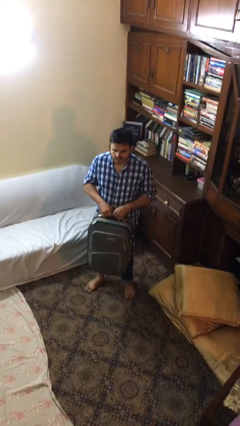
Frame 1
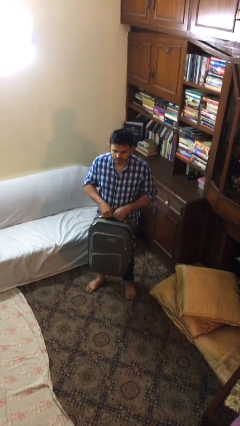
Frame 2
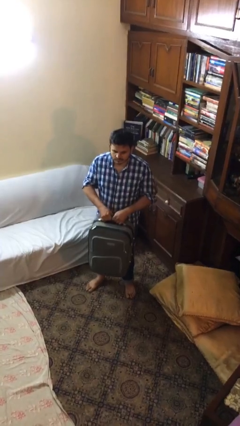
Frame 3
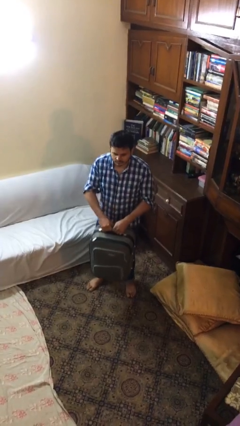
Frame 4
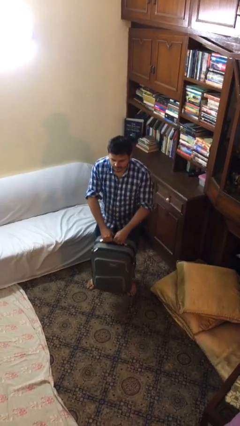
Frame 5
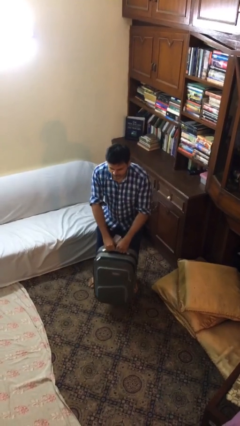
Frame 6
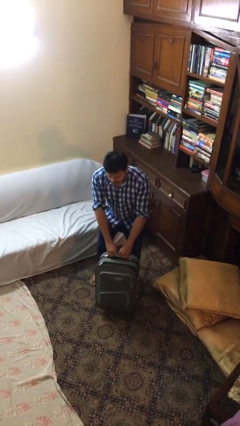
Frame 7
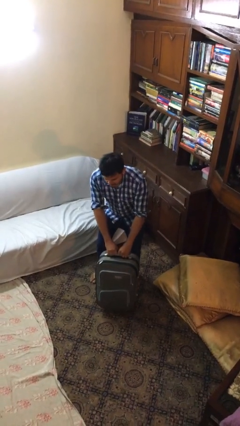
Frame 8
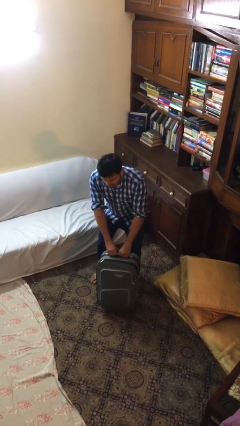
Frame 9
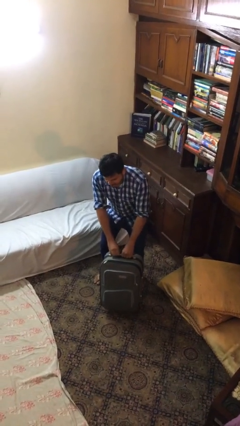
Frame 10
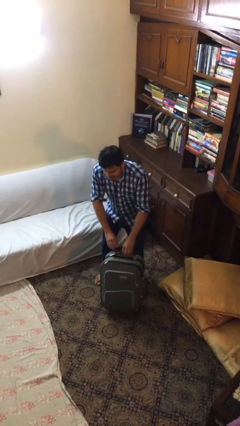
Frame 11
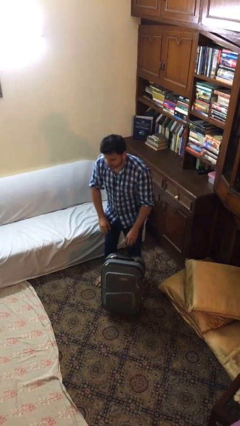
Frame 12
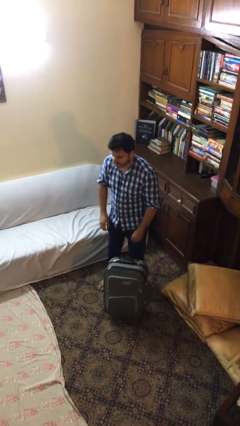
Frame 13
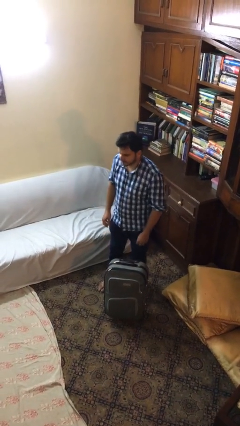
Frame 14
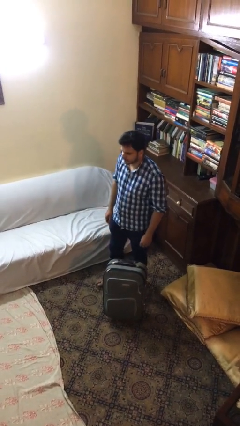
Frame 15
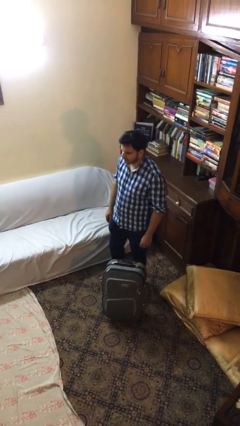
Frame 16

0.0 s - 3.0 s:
person puts down object on floor

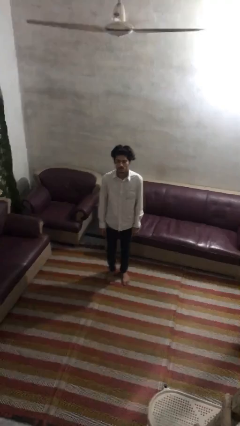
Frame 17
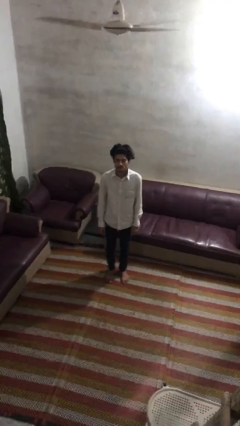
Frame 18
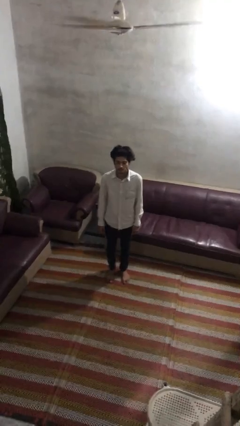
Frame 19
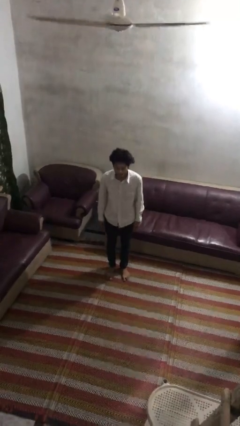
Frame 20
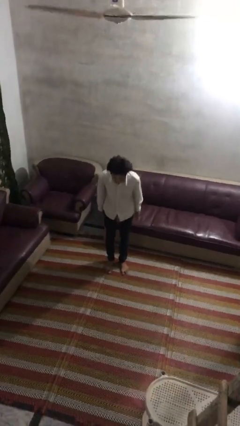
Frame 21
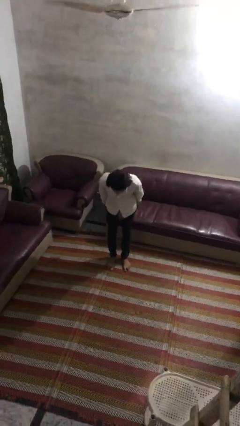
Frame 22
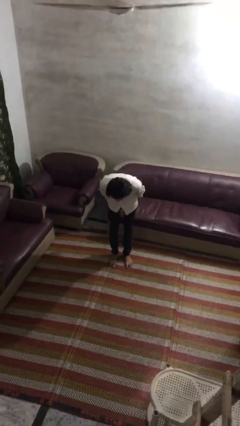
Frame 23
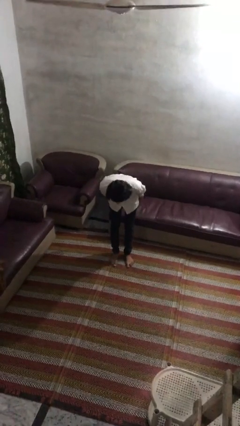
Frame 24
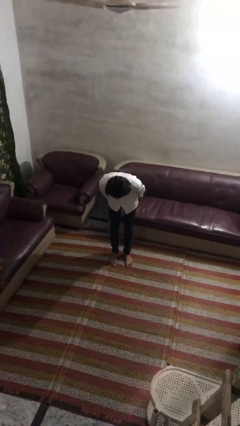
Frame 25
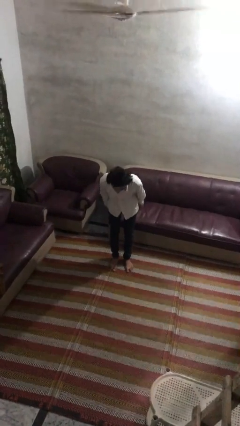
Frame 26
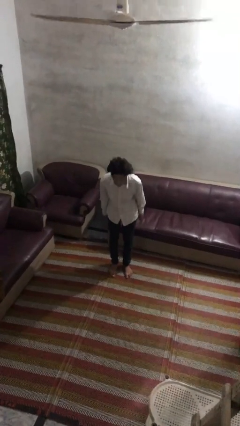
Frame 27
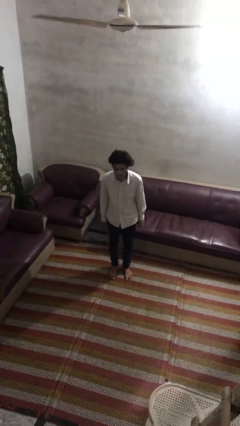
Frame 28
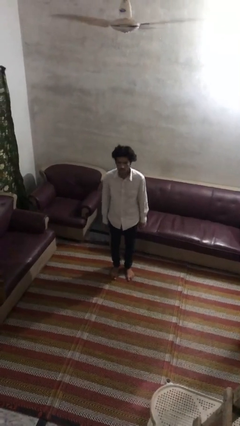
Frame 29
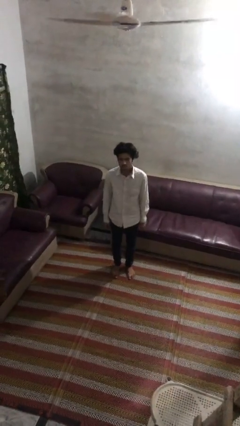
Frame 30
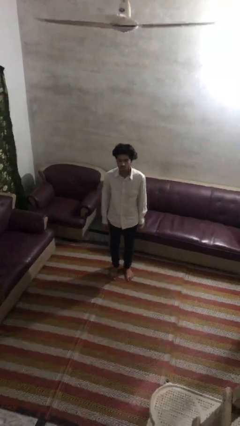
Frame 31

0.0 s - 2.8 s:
person bows

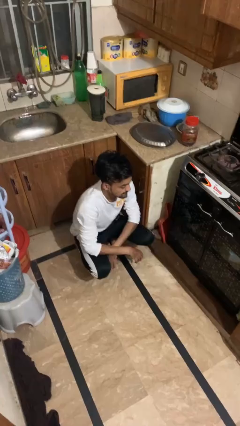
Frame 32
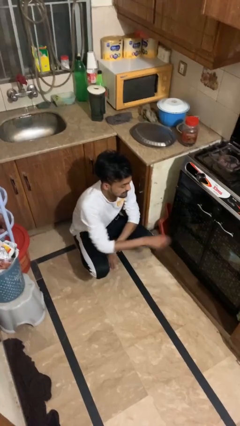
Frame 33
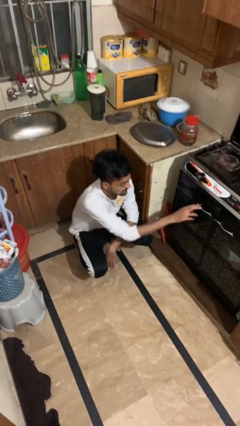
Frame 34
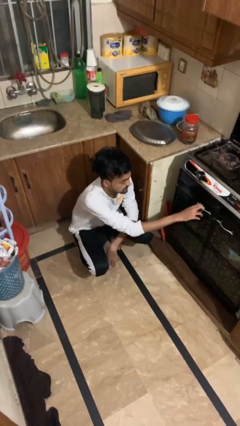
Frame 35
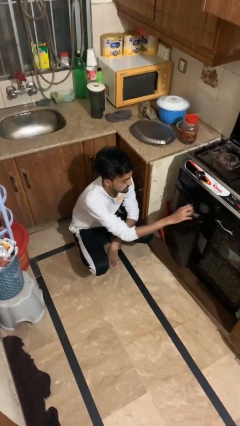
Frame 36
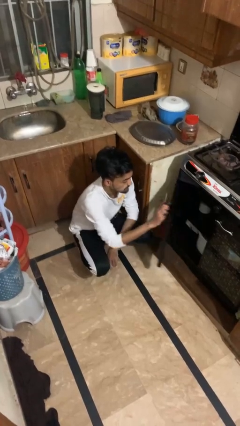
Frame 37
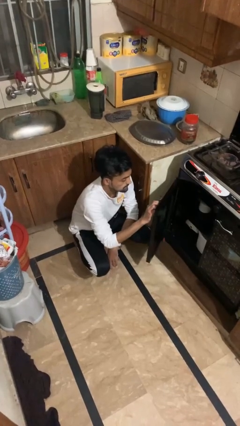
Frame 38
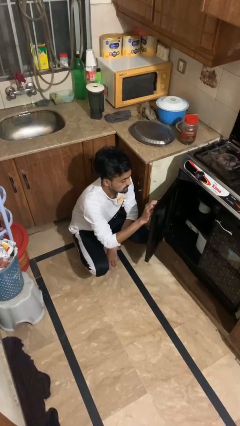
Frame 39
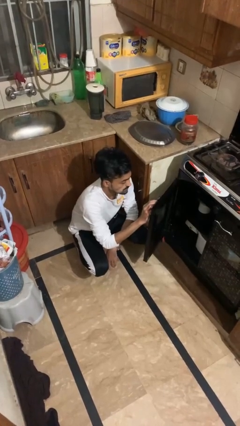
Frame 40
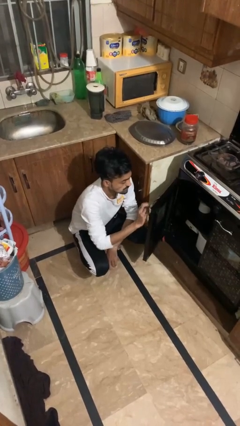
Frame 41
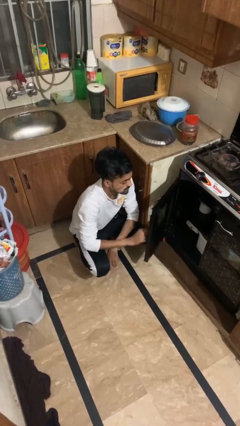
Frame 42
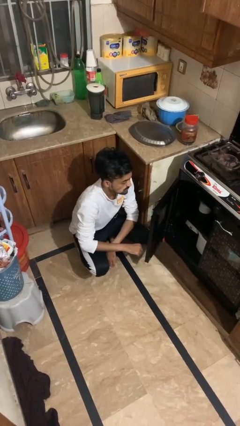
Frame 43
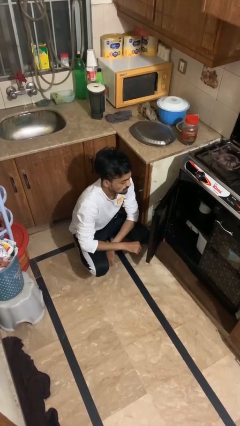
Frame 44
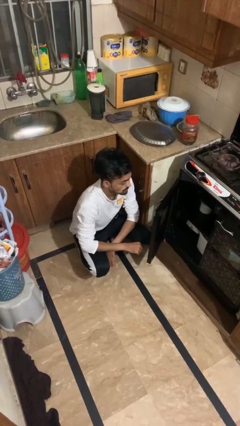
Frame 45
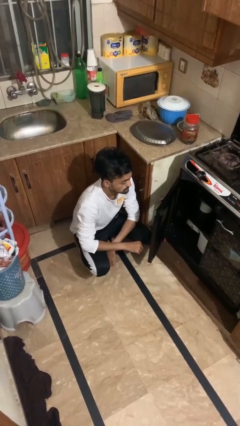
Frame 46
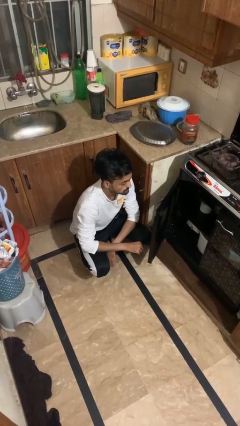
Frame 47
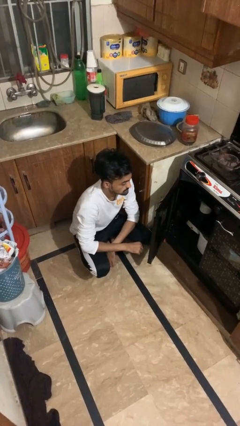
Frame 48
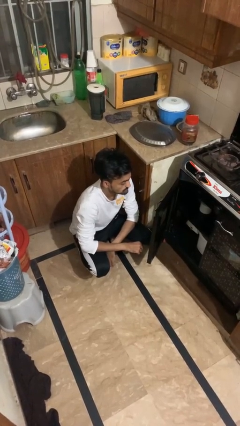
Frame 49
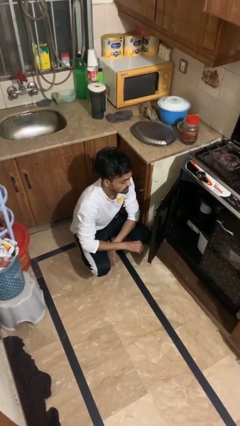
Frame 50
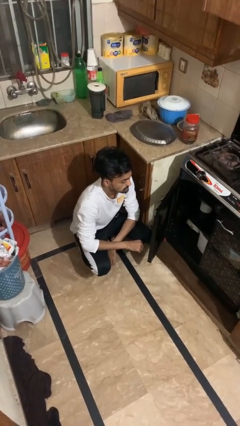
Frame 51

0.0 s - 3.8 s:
person opens oven door

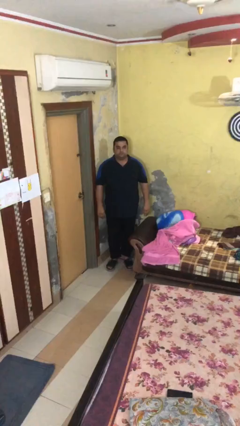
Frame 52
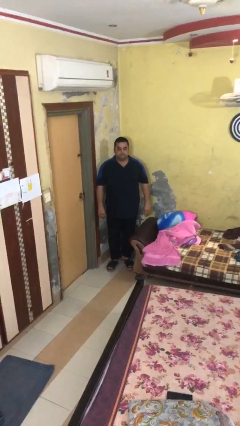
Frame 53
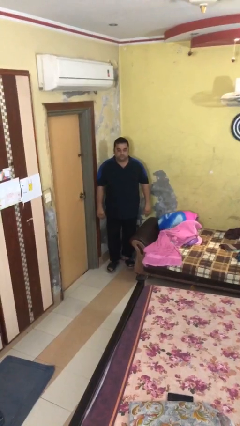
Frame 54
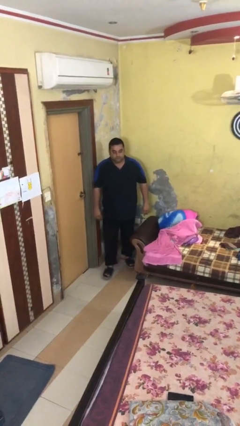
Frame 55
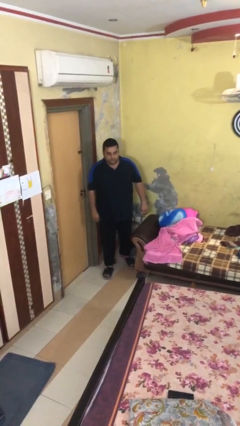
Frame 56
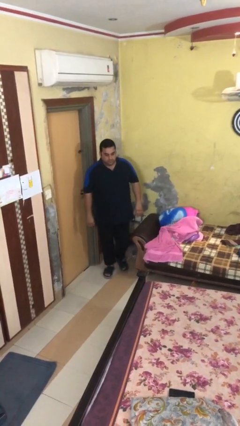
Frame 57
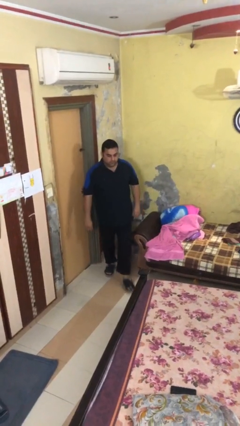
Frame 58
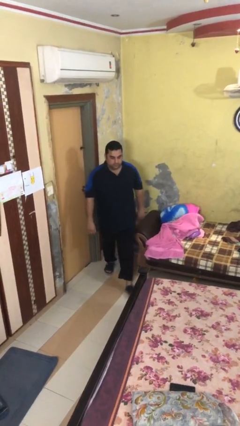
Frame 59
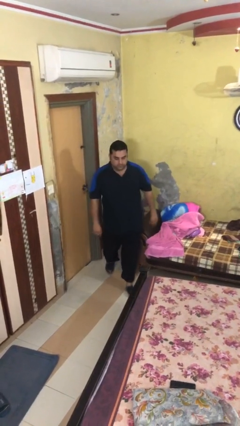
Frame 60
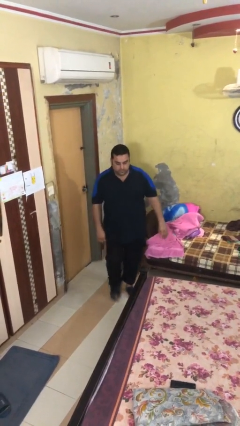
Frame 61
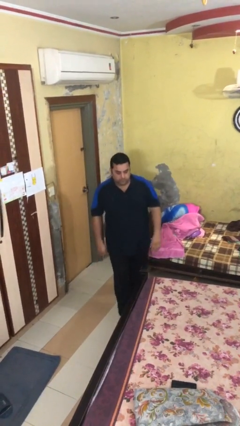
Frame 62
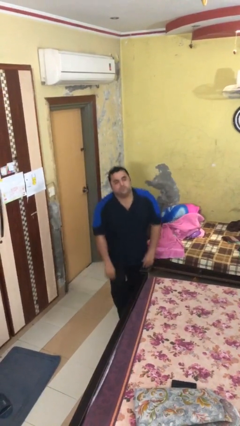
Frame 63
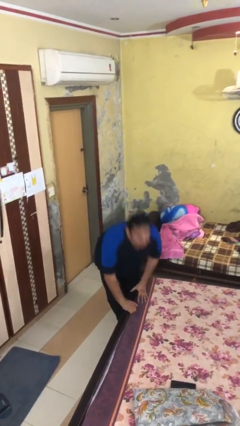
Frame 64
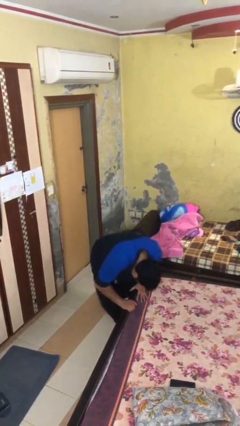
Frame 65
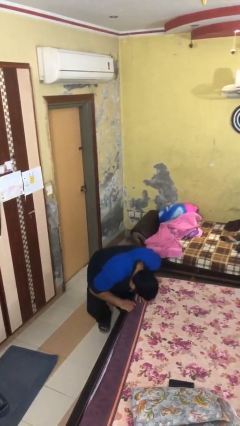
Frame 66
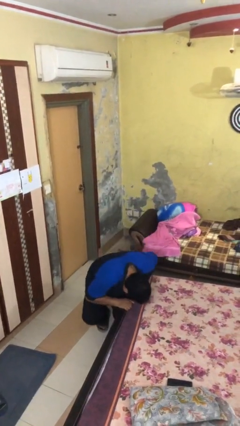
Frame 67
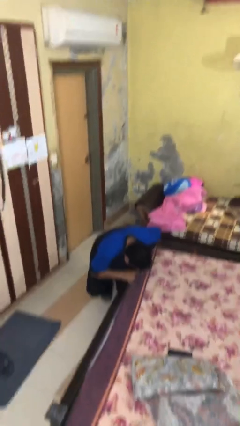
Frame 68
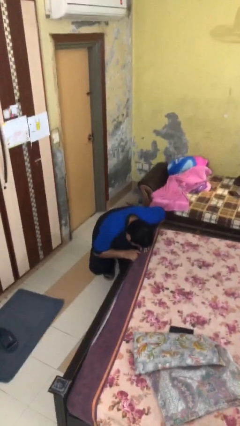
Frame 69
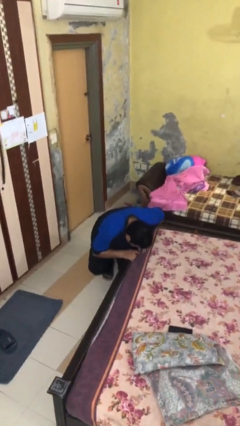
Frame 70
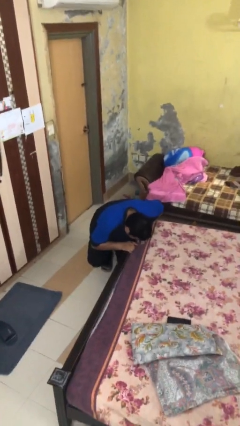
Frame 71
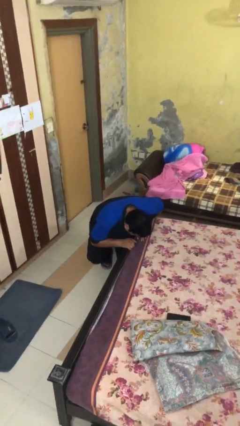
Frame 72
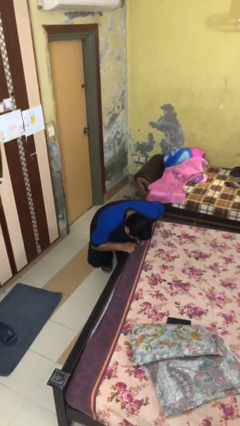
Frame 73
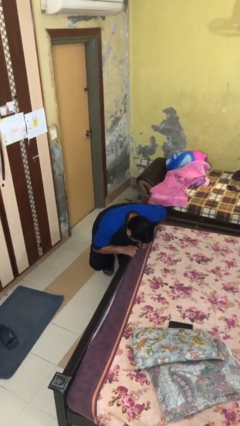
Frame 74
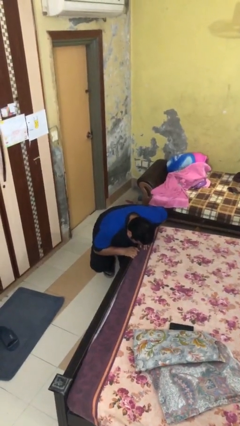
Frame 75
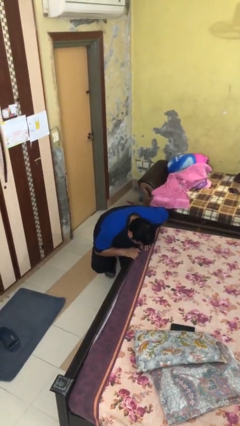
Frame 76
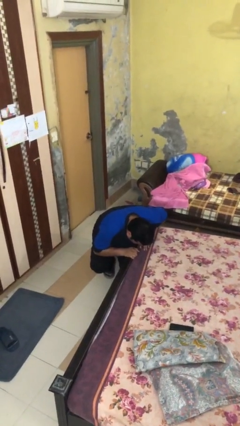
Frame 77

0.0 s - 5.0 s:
person trips on object on floor

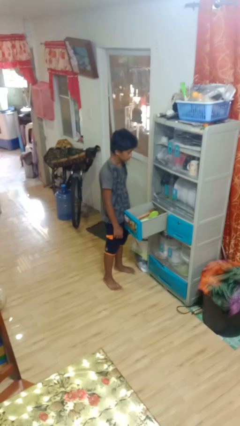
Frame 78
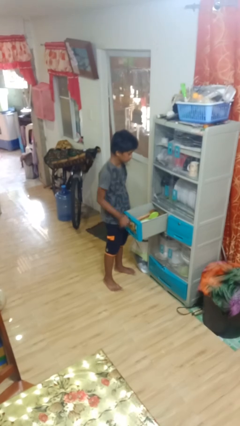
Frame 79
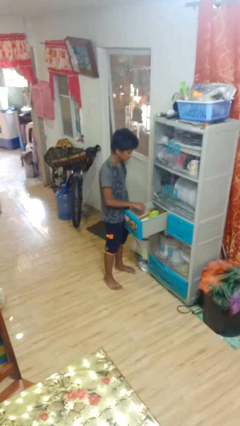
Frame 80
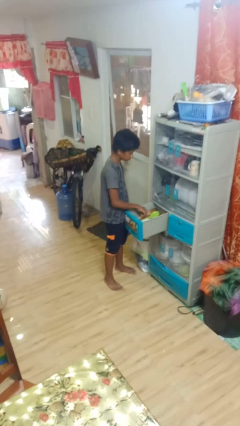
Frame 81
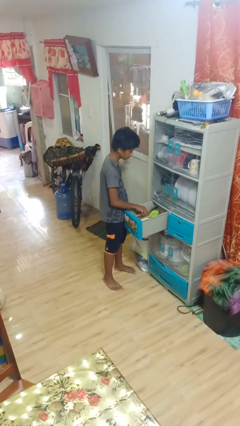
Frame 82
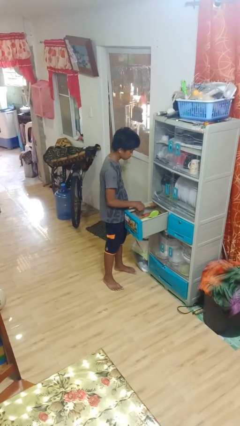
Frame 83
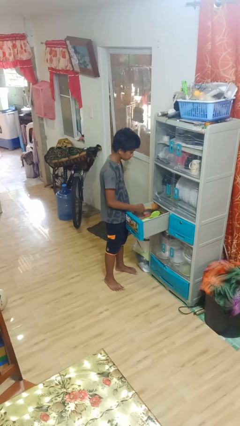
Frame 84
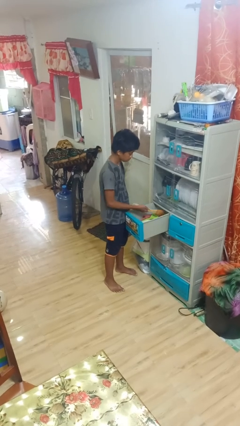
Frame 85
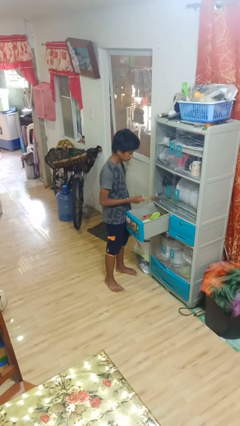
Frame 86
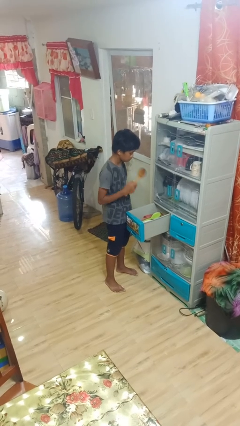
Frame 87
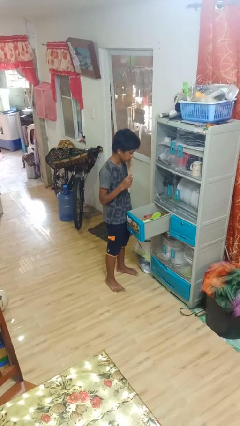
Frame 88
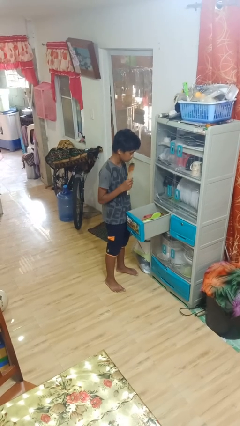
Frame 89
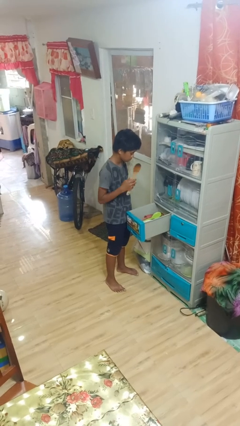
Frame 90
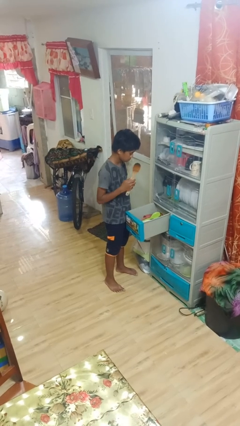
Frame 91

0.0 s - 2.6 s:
person takes object from kitchen drawer

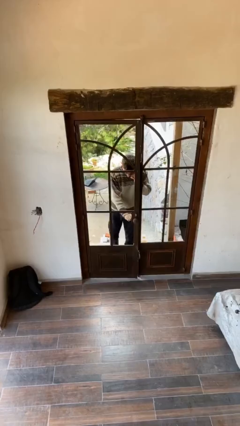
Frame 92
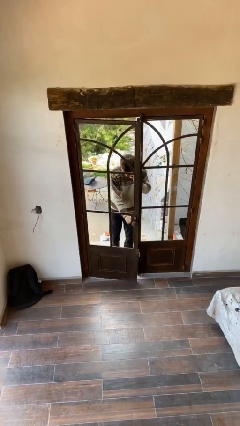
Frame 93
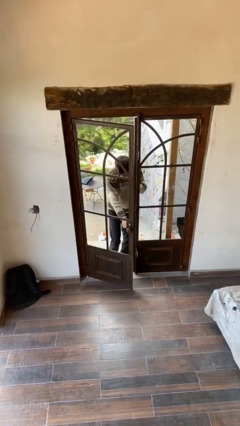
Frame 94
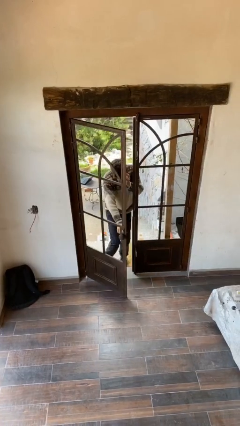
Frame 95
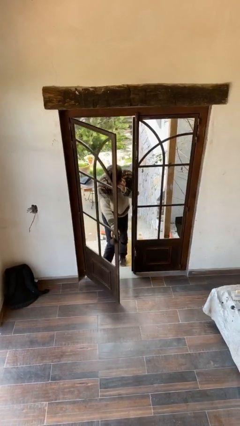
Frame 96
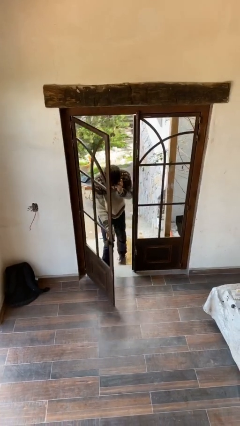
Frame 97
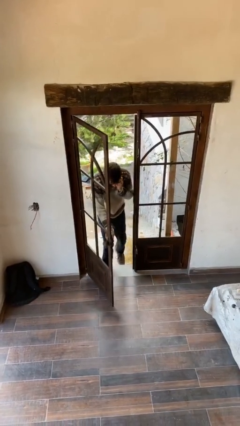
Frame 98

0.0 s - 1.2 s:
person opens facility door
